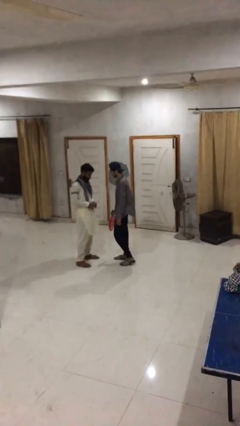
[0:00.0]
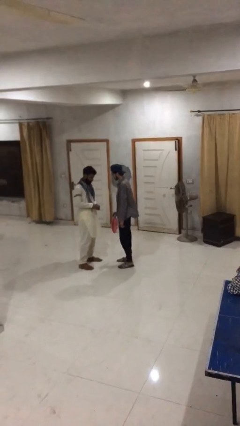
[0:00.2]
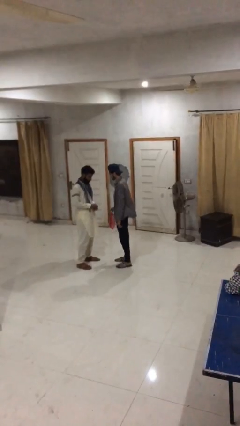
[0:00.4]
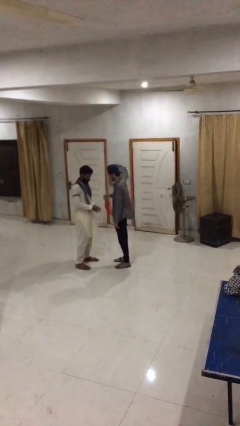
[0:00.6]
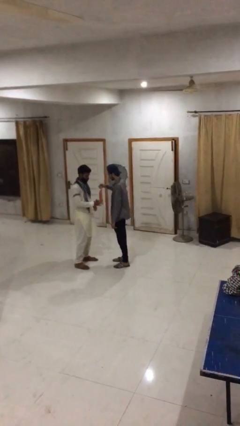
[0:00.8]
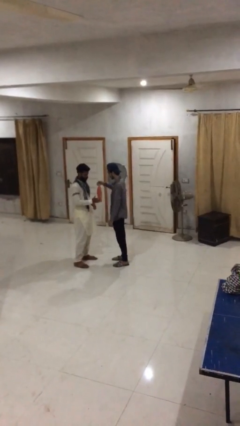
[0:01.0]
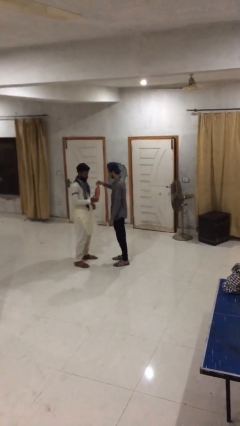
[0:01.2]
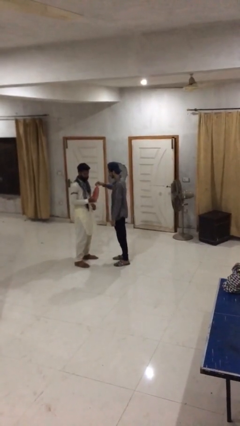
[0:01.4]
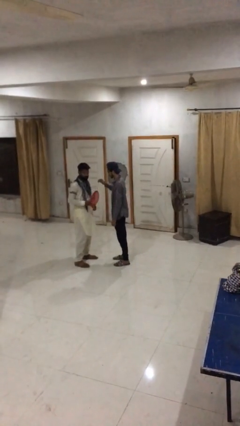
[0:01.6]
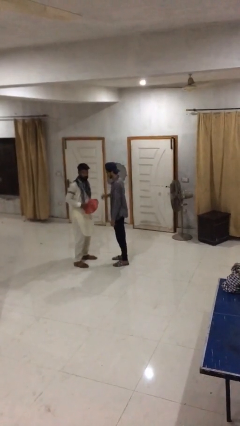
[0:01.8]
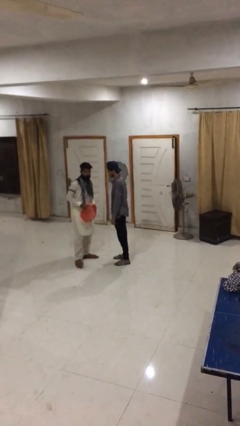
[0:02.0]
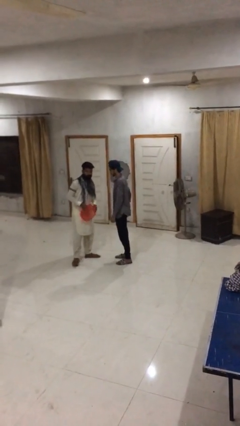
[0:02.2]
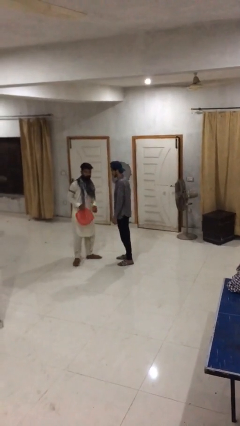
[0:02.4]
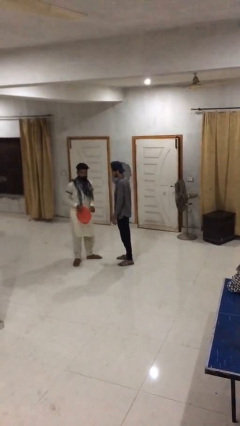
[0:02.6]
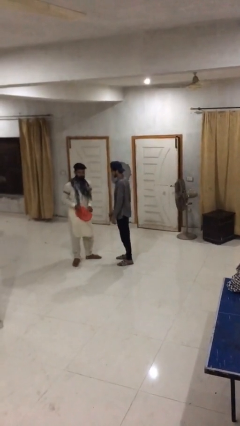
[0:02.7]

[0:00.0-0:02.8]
person transfers object to person

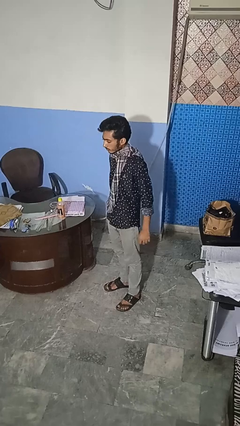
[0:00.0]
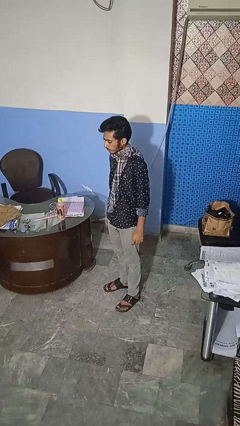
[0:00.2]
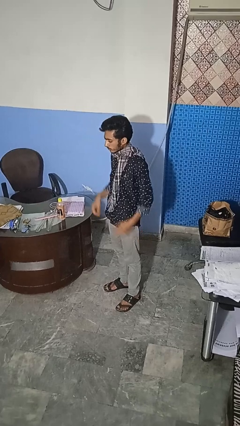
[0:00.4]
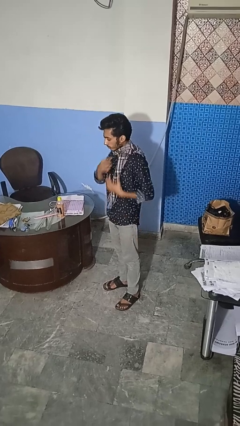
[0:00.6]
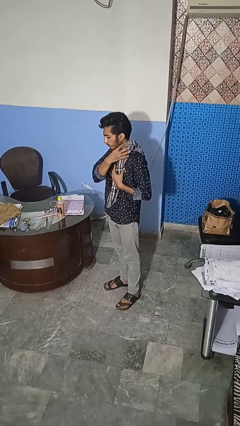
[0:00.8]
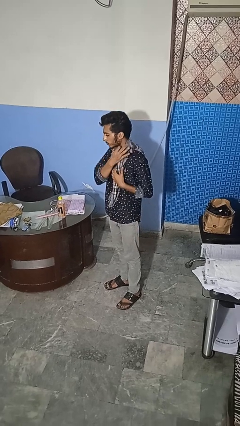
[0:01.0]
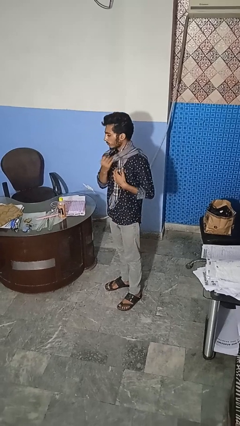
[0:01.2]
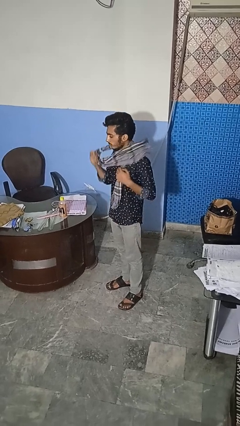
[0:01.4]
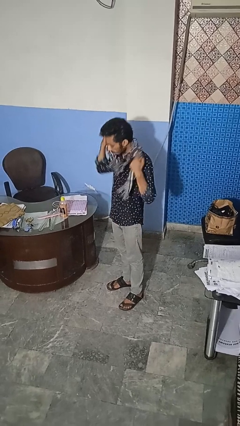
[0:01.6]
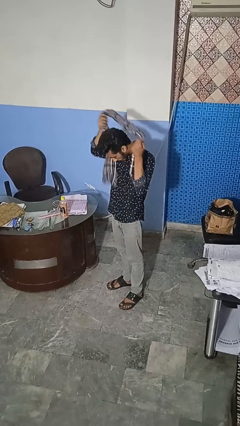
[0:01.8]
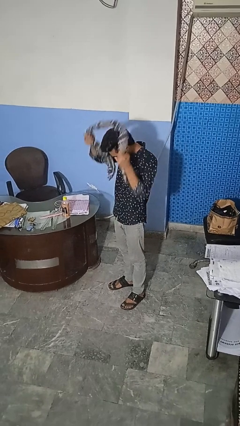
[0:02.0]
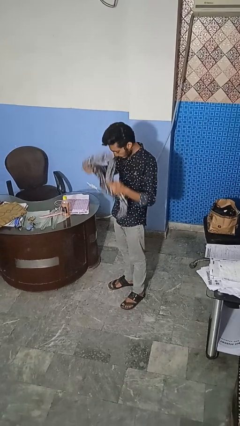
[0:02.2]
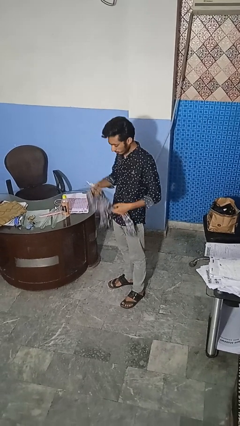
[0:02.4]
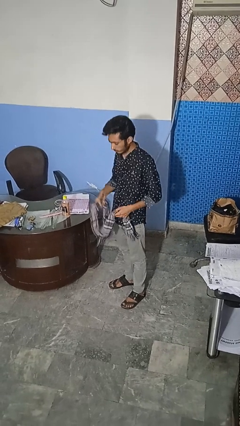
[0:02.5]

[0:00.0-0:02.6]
person takes off scarf

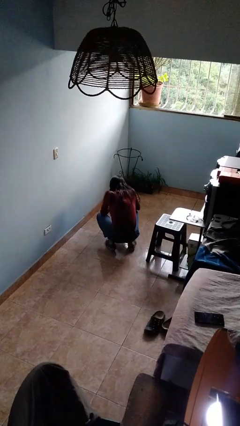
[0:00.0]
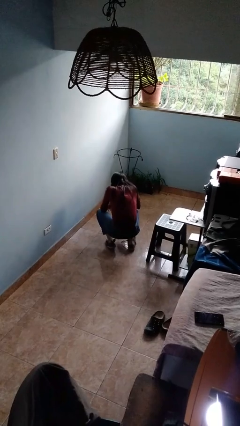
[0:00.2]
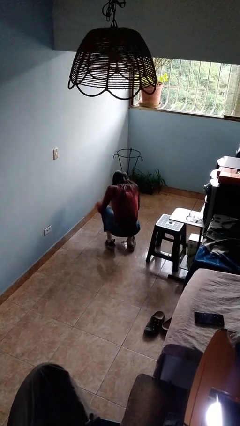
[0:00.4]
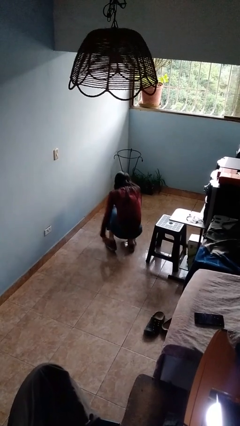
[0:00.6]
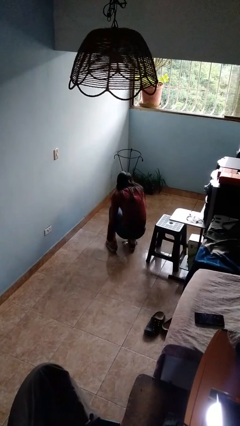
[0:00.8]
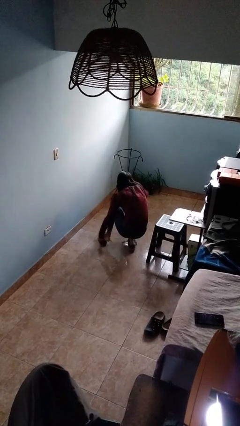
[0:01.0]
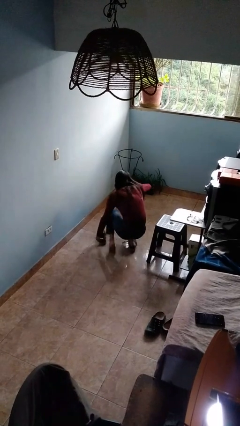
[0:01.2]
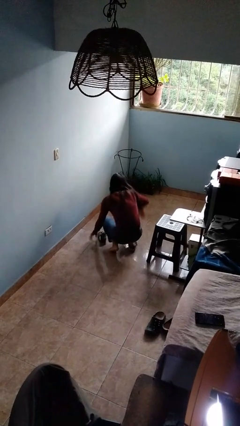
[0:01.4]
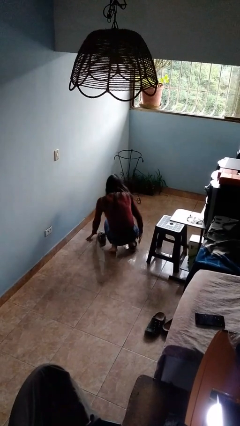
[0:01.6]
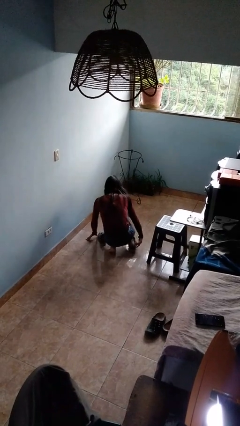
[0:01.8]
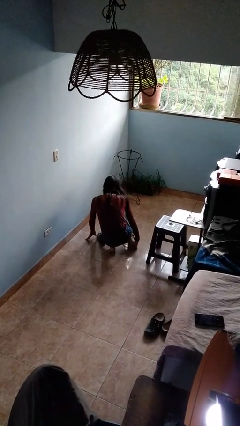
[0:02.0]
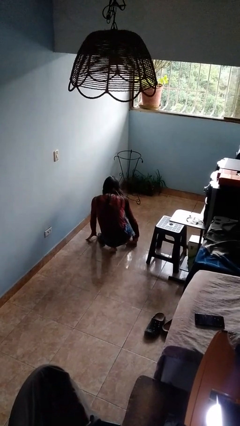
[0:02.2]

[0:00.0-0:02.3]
person takes off shoes

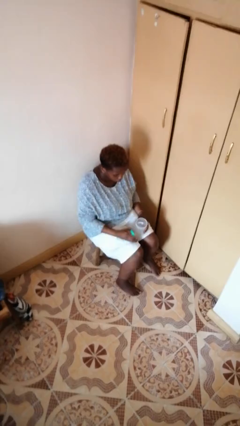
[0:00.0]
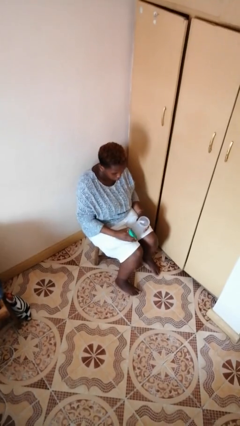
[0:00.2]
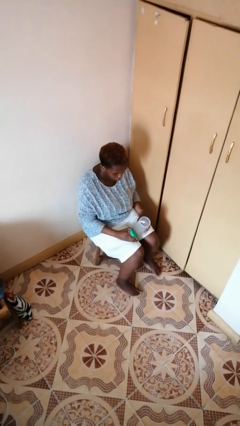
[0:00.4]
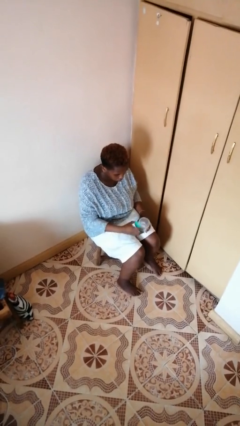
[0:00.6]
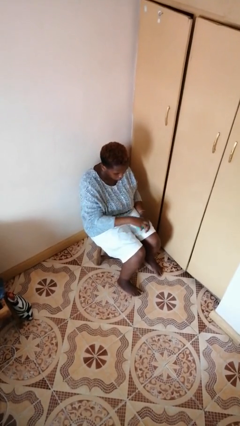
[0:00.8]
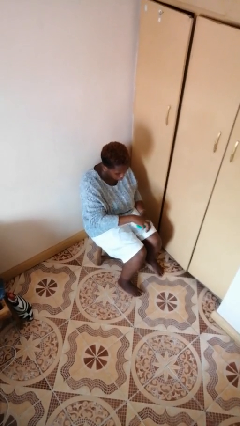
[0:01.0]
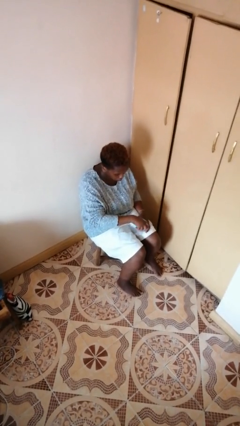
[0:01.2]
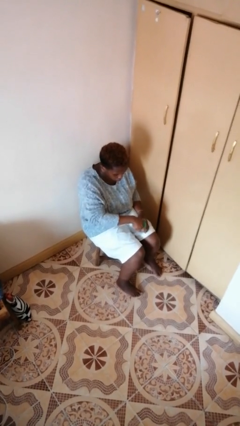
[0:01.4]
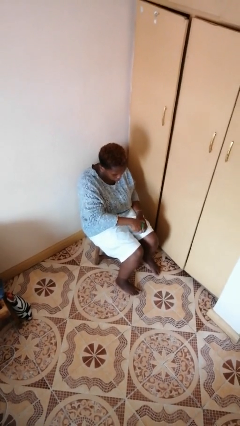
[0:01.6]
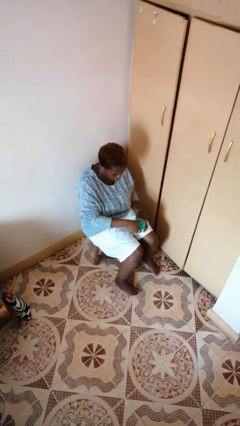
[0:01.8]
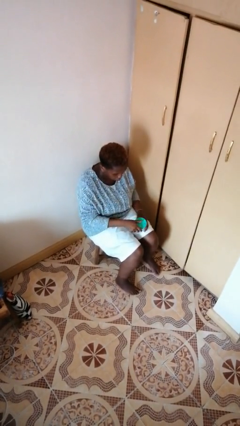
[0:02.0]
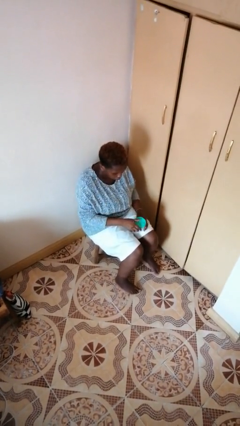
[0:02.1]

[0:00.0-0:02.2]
person closes jar

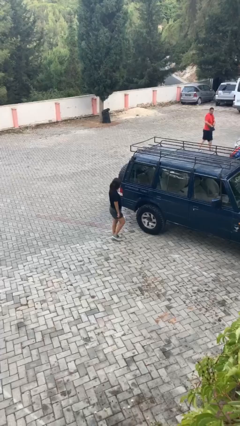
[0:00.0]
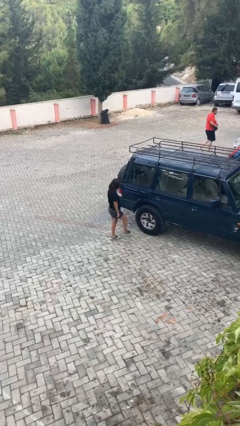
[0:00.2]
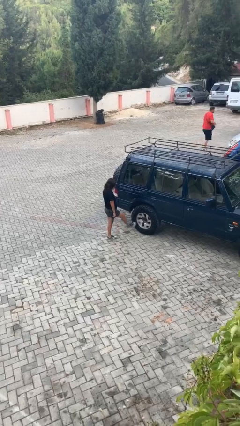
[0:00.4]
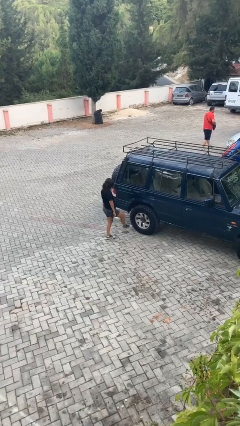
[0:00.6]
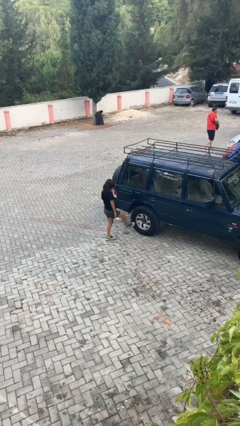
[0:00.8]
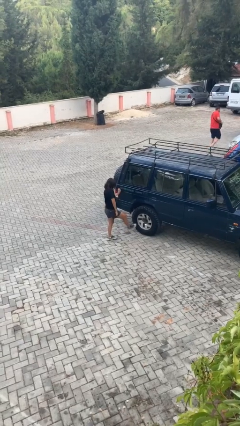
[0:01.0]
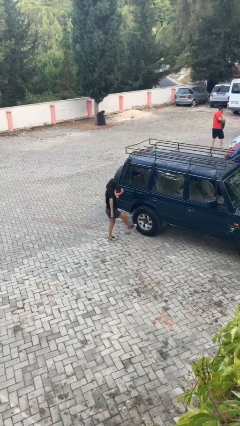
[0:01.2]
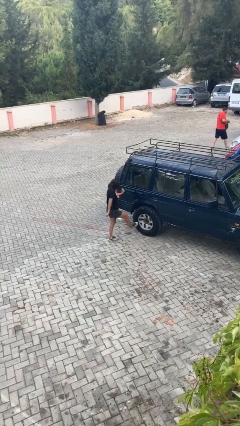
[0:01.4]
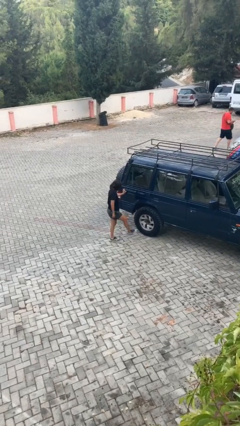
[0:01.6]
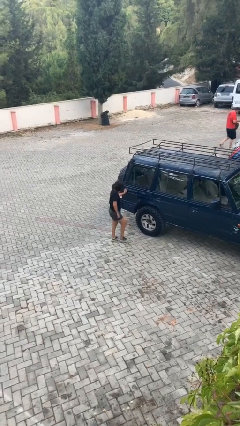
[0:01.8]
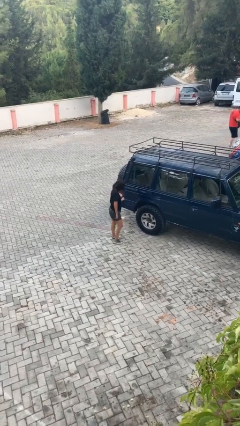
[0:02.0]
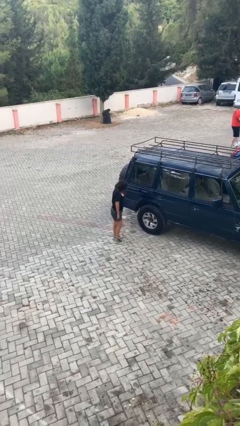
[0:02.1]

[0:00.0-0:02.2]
person kicks car tires

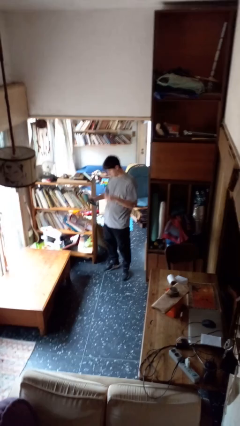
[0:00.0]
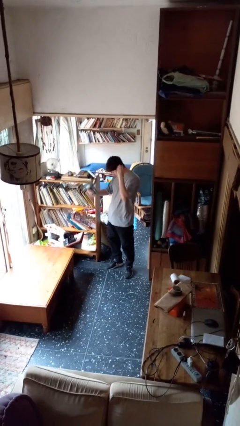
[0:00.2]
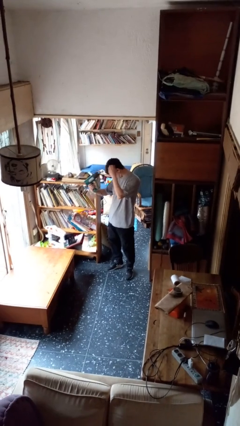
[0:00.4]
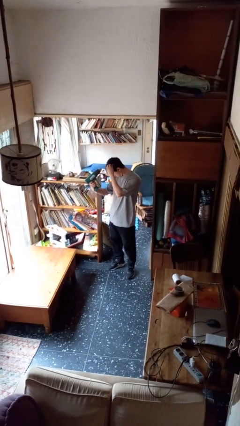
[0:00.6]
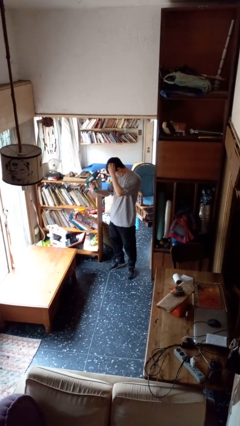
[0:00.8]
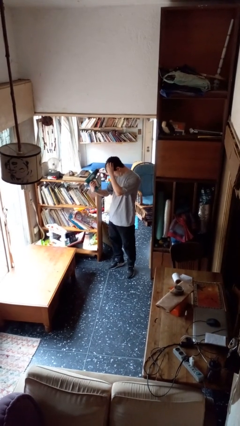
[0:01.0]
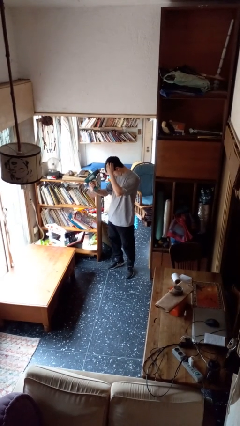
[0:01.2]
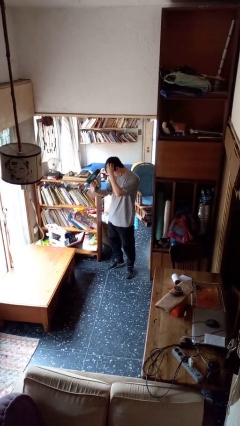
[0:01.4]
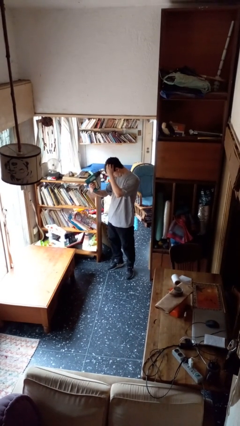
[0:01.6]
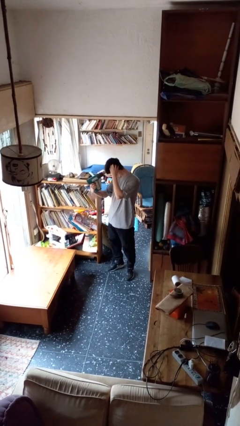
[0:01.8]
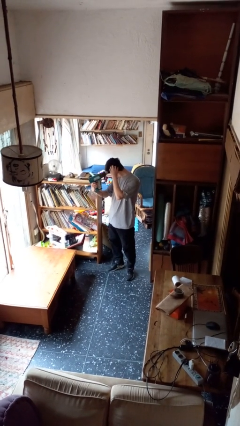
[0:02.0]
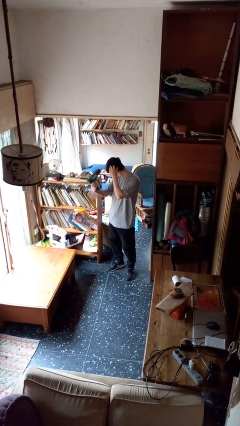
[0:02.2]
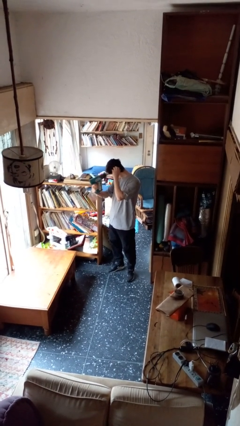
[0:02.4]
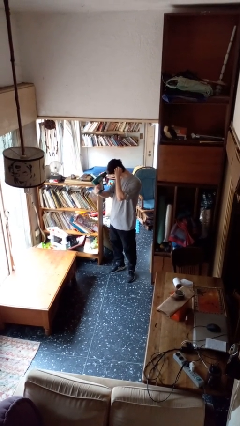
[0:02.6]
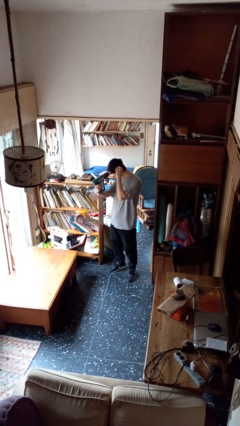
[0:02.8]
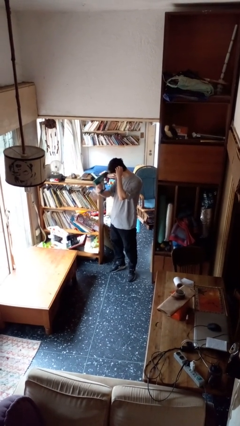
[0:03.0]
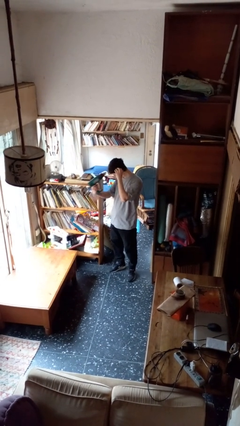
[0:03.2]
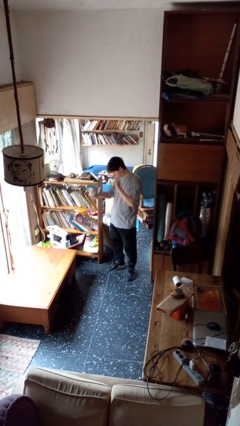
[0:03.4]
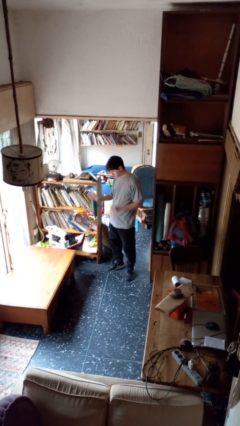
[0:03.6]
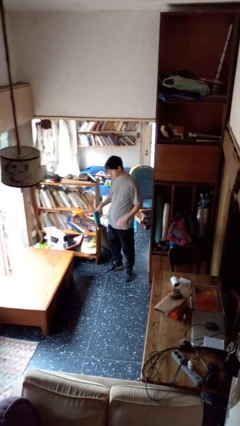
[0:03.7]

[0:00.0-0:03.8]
person dries hair with hairdryer

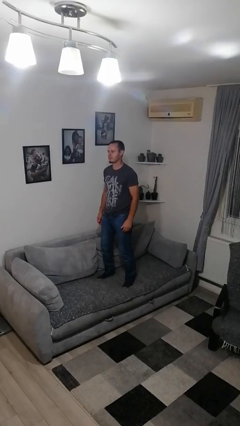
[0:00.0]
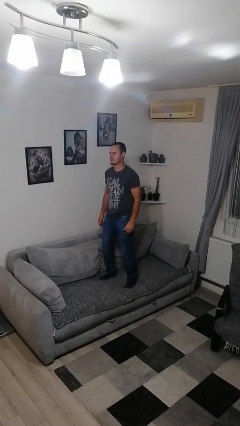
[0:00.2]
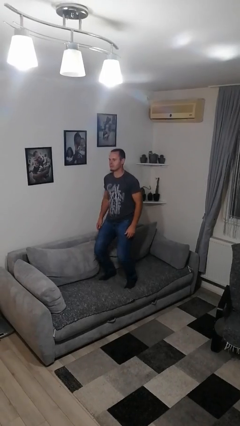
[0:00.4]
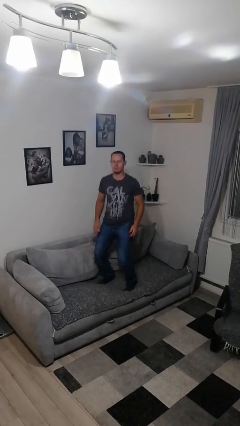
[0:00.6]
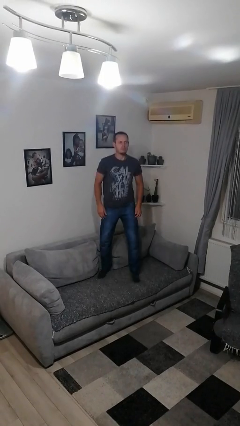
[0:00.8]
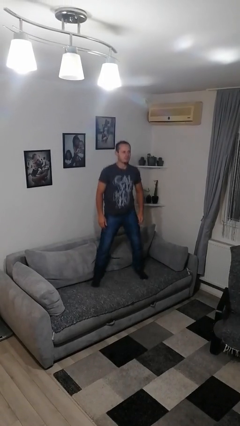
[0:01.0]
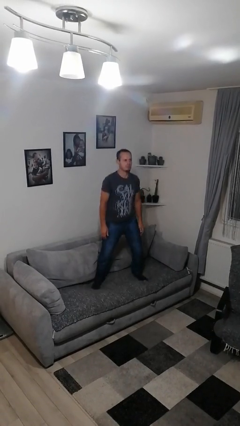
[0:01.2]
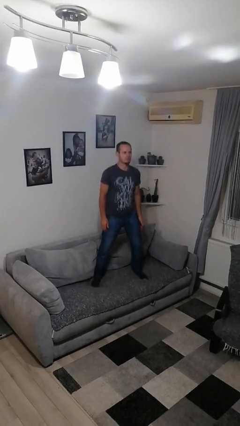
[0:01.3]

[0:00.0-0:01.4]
person jumps on couch
